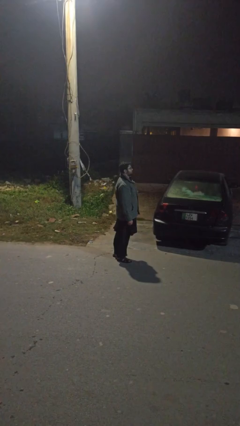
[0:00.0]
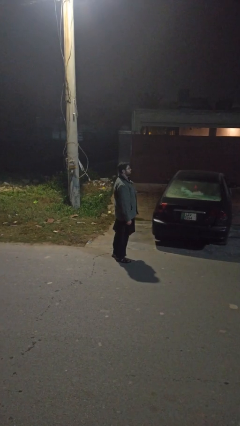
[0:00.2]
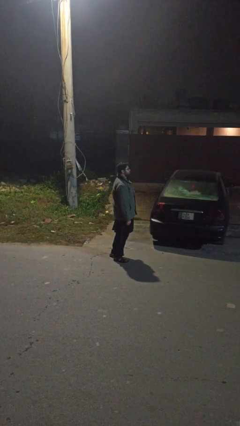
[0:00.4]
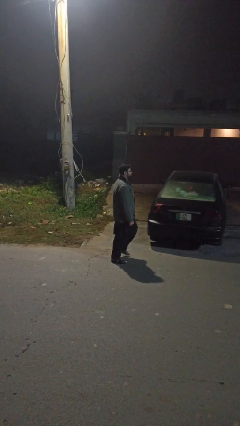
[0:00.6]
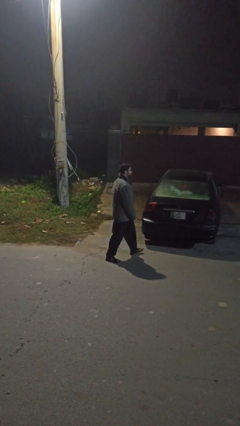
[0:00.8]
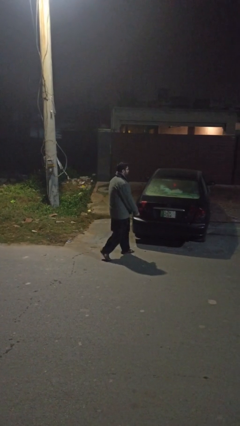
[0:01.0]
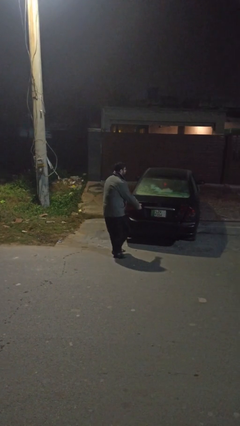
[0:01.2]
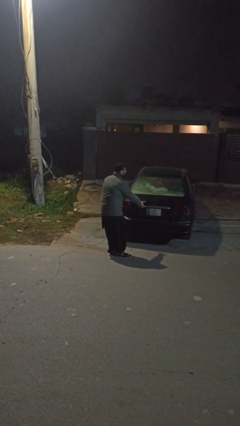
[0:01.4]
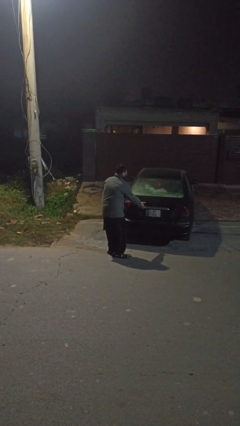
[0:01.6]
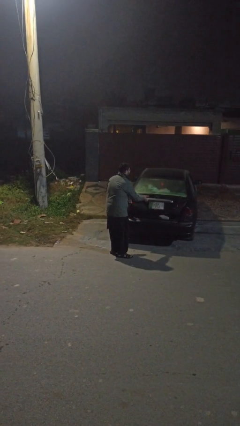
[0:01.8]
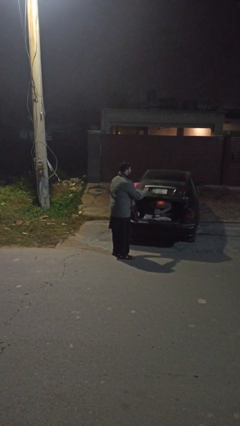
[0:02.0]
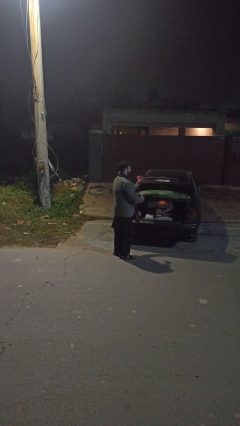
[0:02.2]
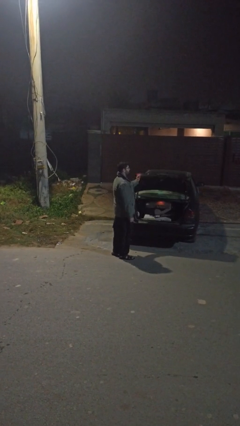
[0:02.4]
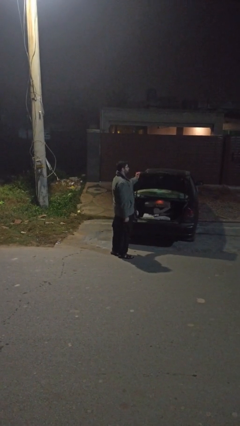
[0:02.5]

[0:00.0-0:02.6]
person opens car trunk

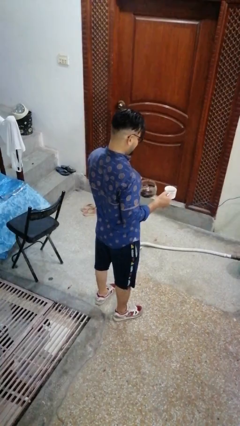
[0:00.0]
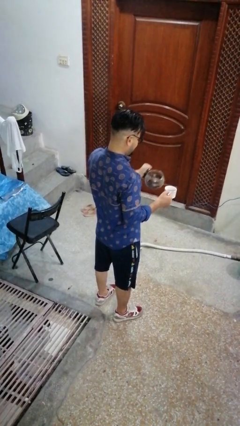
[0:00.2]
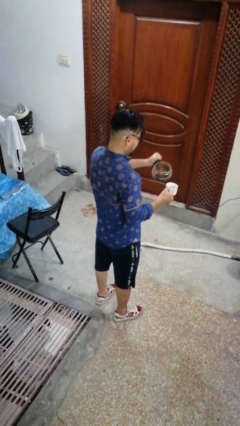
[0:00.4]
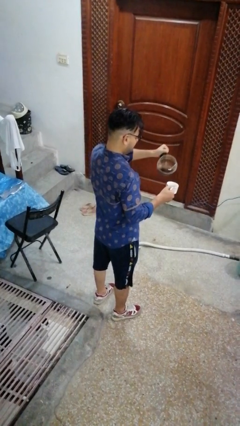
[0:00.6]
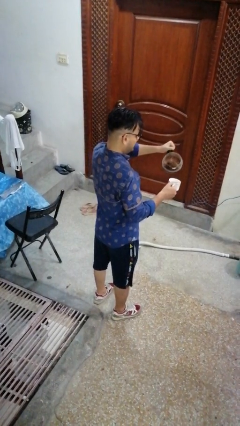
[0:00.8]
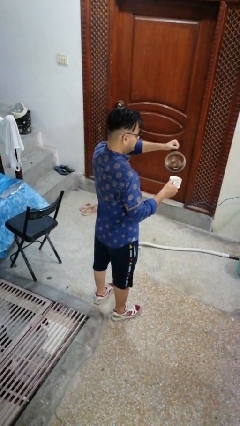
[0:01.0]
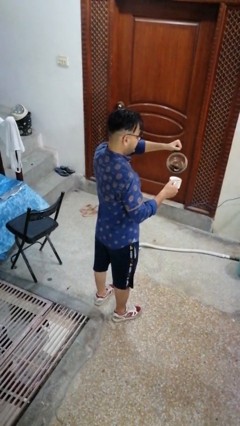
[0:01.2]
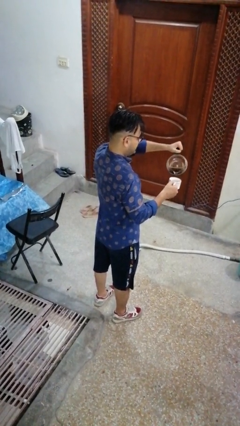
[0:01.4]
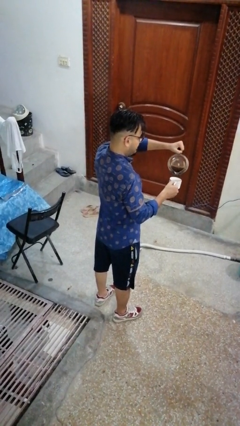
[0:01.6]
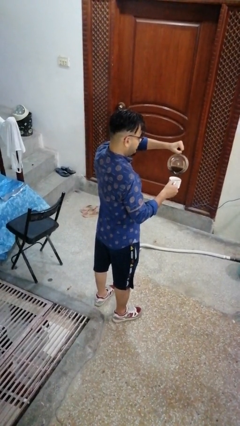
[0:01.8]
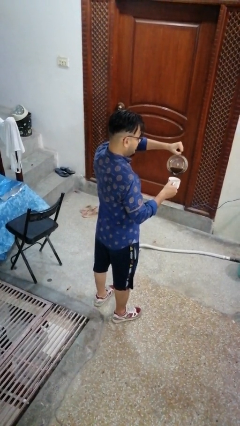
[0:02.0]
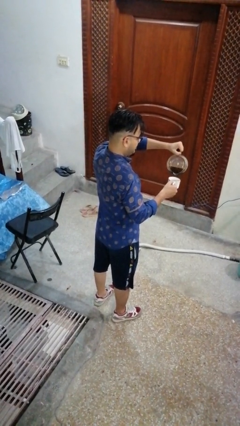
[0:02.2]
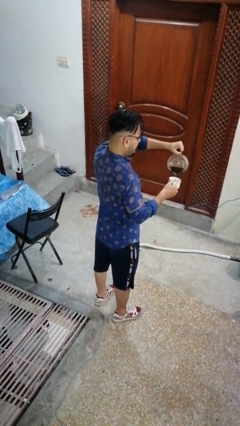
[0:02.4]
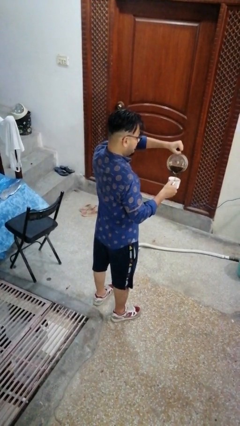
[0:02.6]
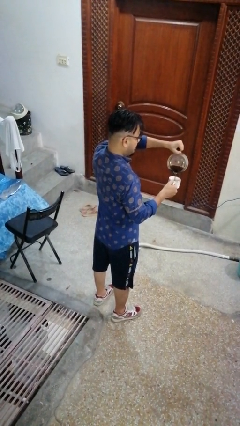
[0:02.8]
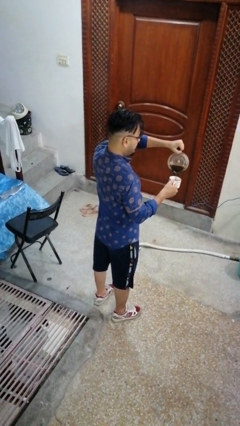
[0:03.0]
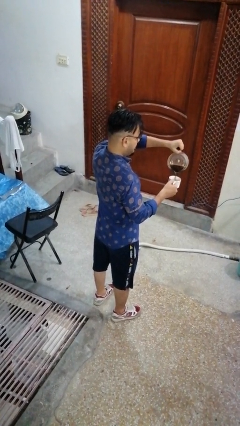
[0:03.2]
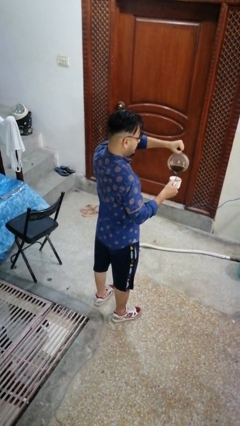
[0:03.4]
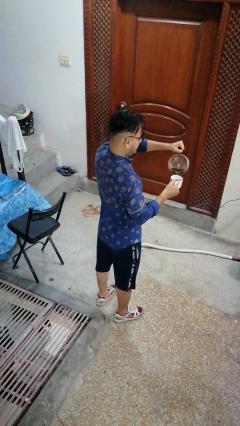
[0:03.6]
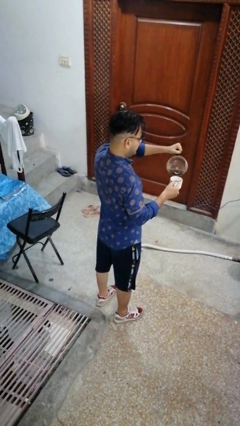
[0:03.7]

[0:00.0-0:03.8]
person pours coffee into mug

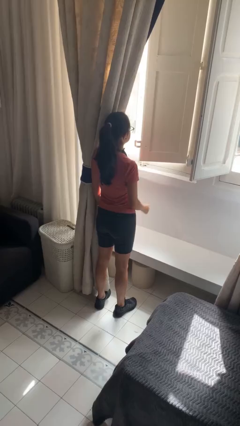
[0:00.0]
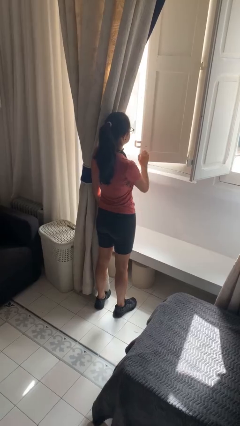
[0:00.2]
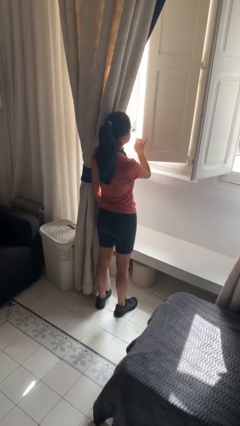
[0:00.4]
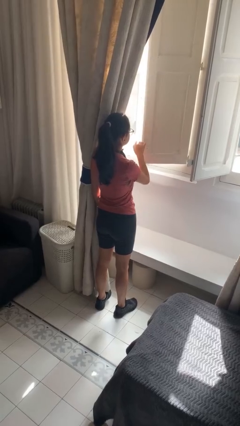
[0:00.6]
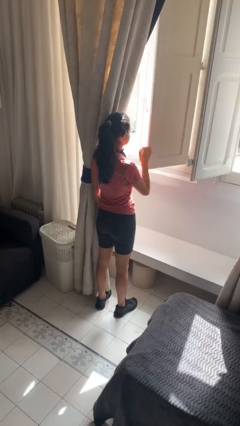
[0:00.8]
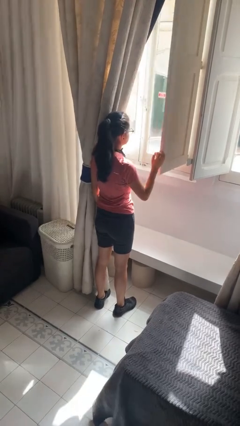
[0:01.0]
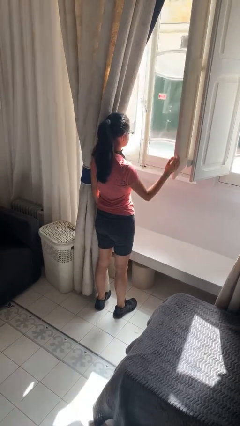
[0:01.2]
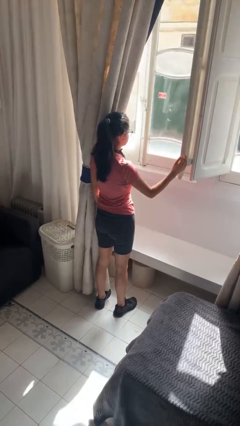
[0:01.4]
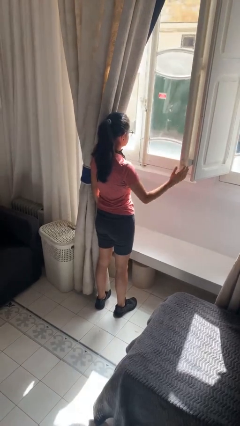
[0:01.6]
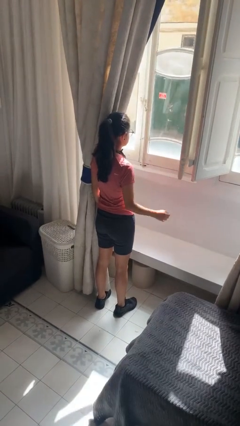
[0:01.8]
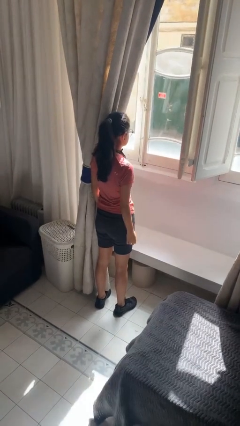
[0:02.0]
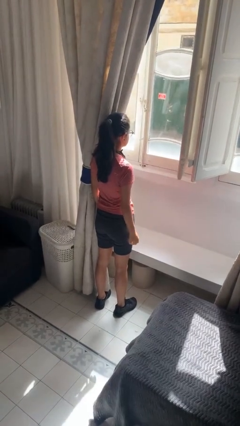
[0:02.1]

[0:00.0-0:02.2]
person opens home window

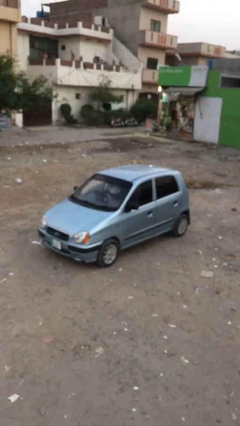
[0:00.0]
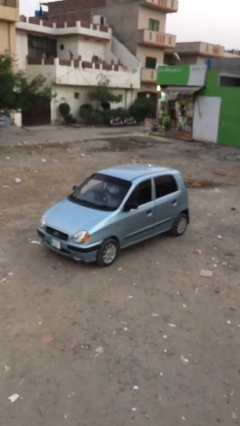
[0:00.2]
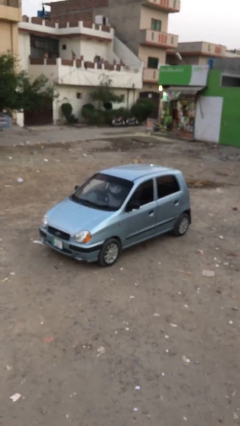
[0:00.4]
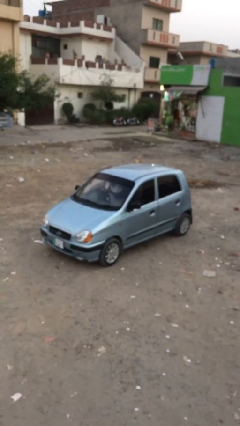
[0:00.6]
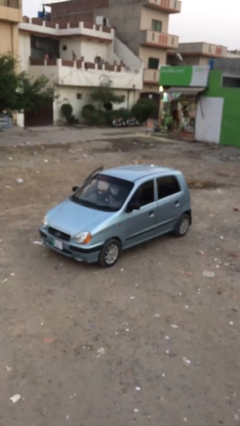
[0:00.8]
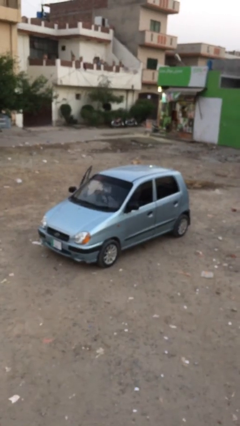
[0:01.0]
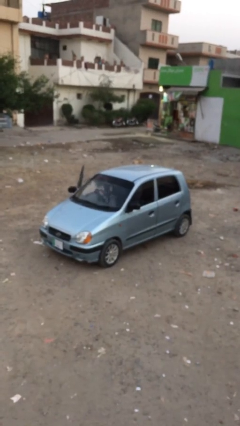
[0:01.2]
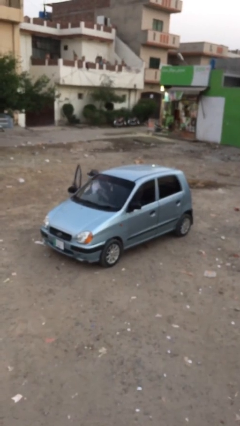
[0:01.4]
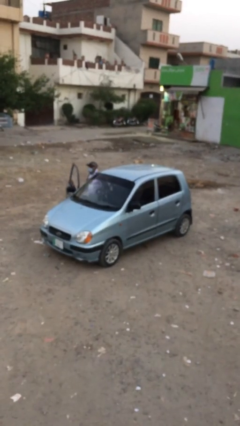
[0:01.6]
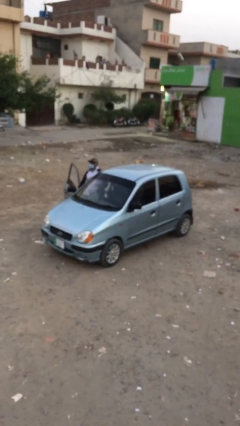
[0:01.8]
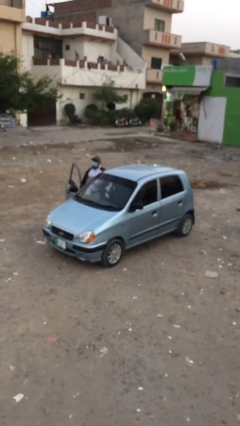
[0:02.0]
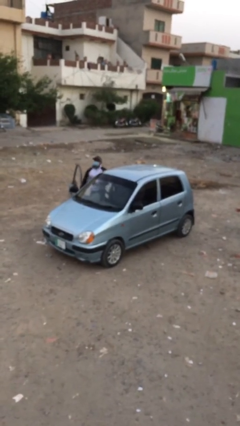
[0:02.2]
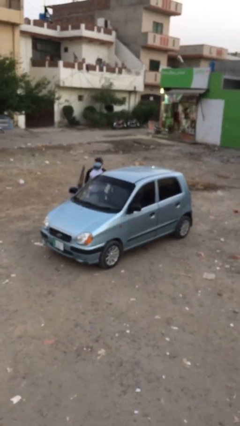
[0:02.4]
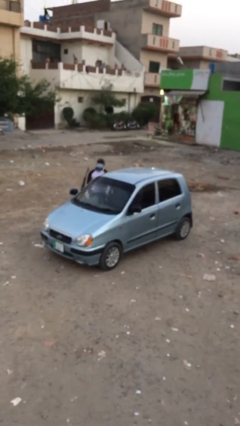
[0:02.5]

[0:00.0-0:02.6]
car drops off person

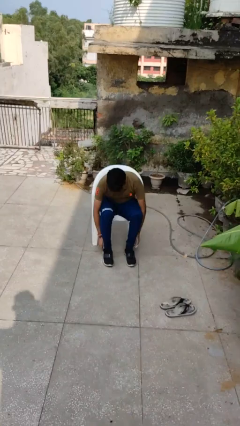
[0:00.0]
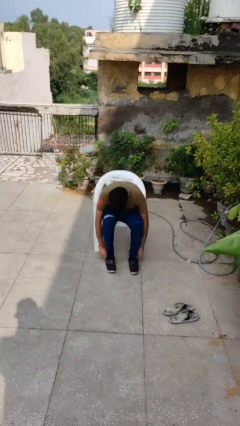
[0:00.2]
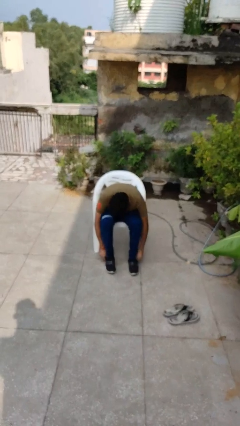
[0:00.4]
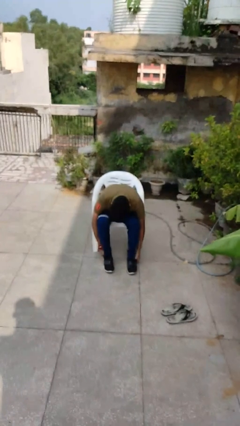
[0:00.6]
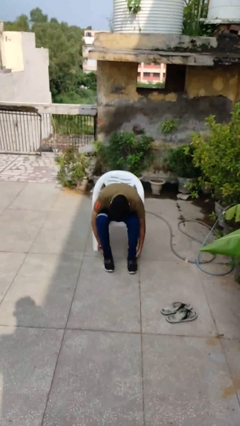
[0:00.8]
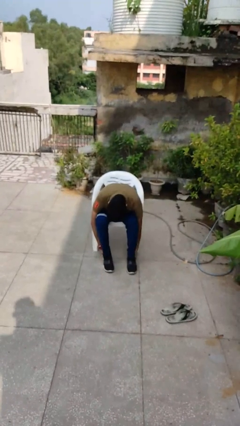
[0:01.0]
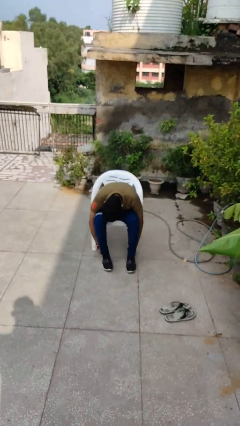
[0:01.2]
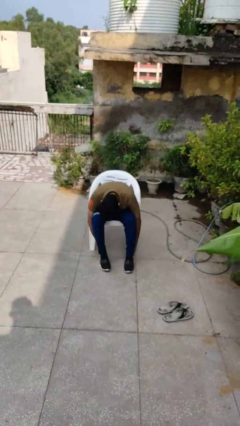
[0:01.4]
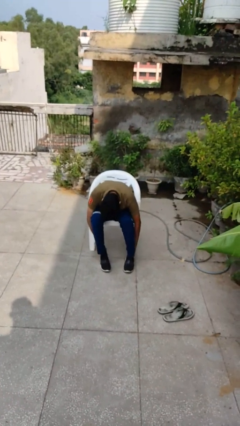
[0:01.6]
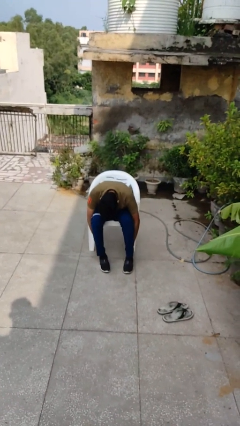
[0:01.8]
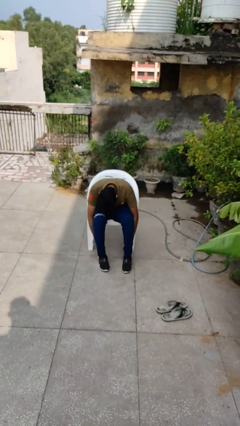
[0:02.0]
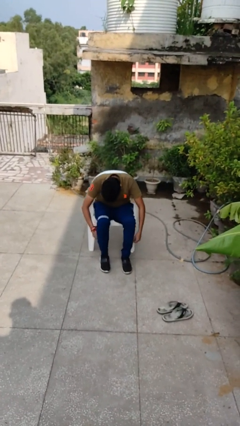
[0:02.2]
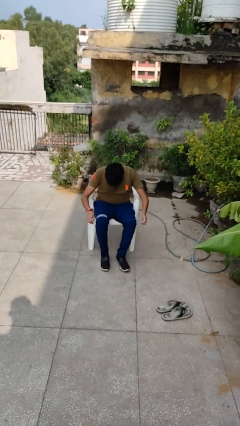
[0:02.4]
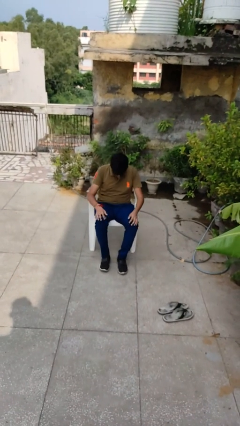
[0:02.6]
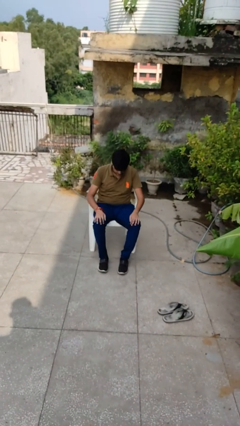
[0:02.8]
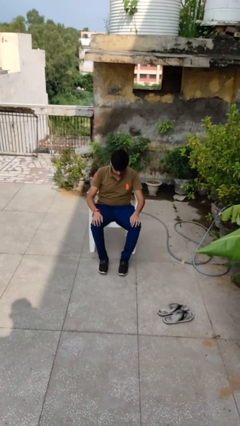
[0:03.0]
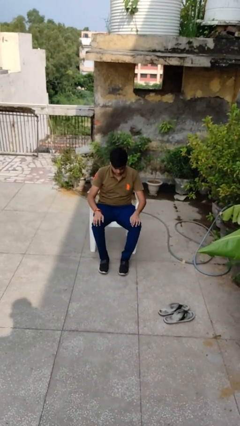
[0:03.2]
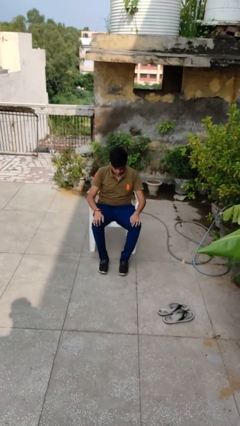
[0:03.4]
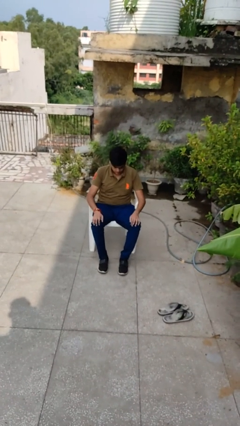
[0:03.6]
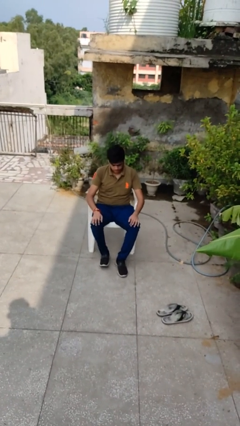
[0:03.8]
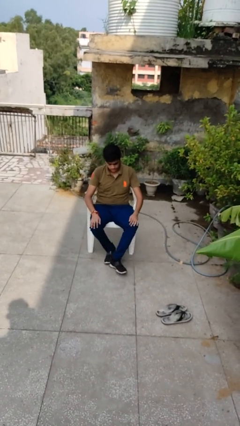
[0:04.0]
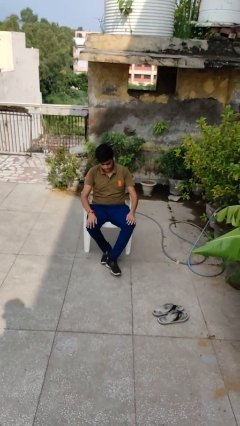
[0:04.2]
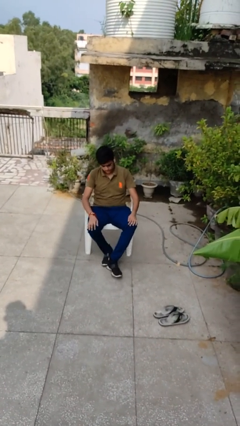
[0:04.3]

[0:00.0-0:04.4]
person puts on shoes

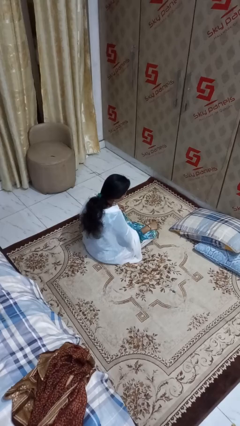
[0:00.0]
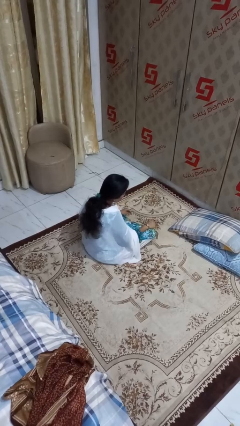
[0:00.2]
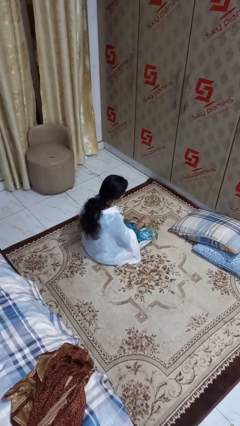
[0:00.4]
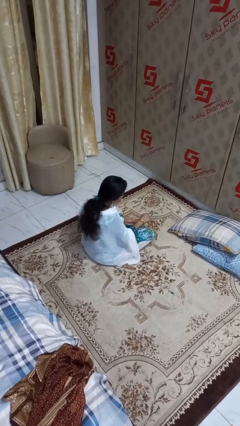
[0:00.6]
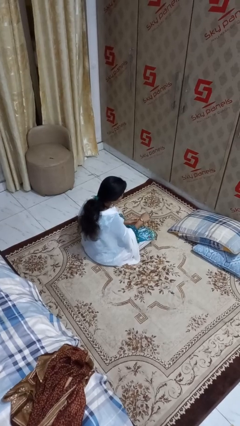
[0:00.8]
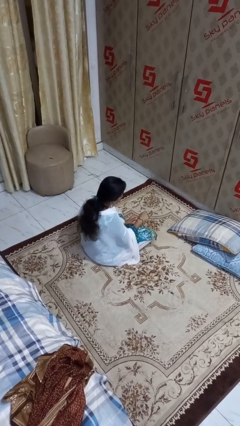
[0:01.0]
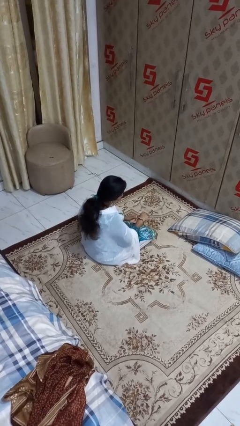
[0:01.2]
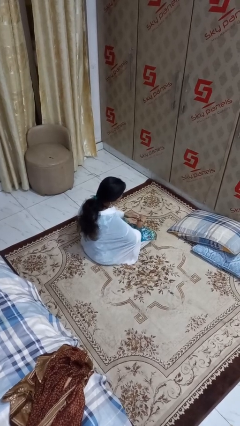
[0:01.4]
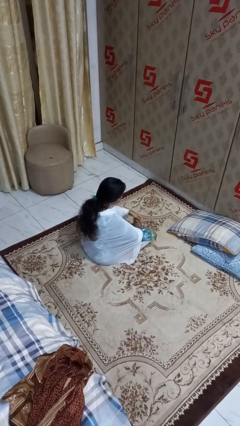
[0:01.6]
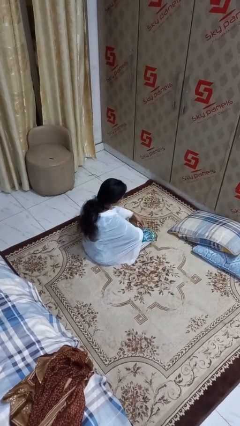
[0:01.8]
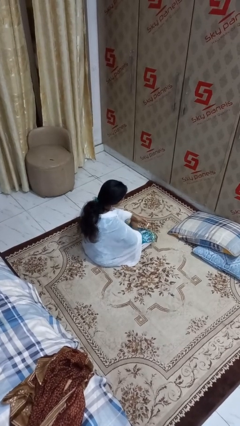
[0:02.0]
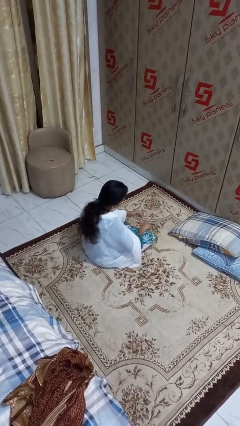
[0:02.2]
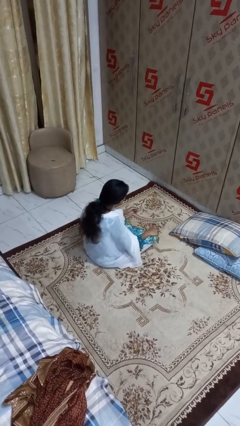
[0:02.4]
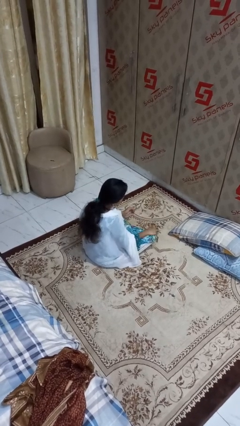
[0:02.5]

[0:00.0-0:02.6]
person takes off wristwatch
